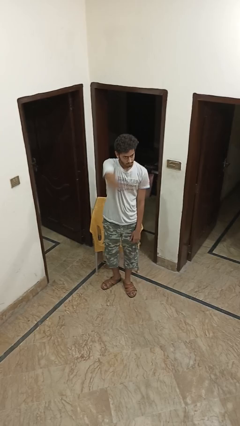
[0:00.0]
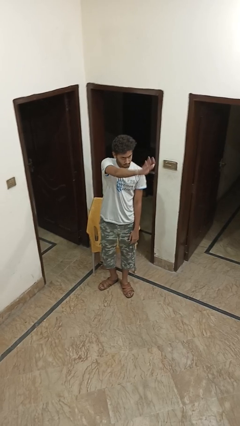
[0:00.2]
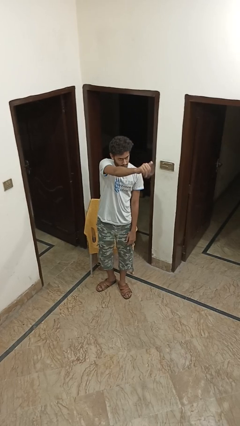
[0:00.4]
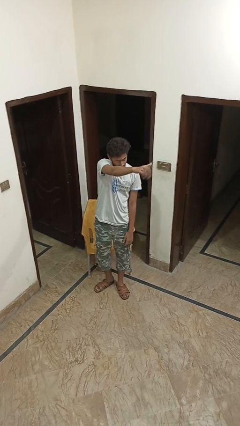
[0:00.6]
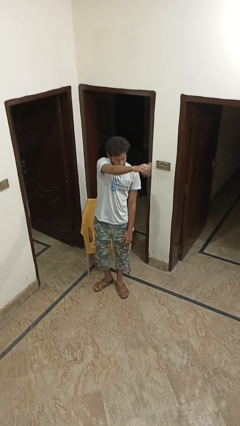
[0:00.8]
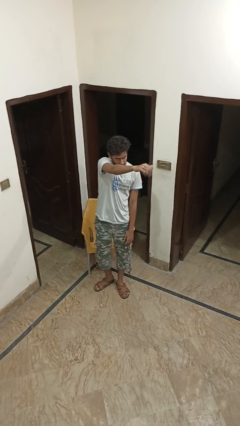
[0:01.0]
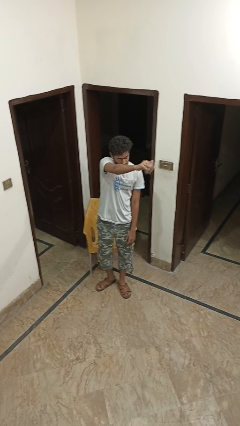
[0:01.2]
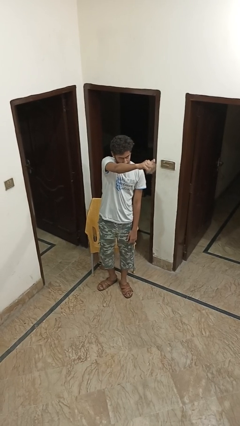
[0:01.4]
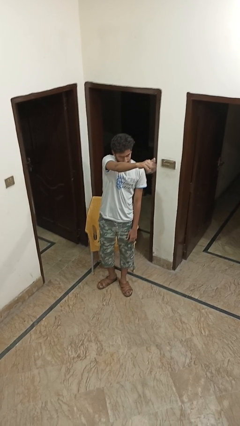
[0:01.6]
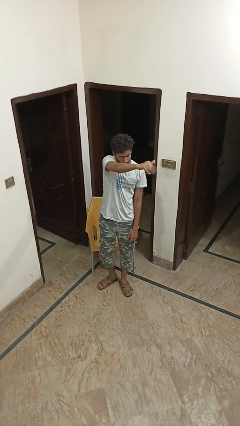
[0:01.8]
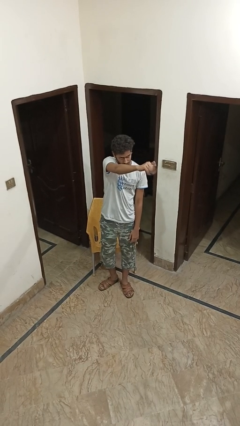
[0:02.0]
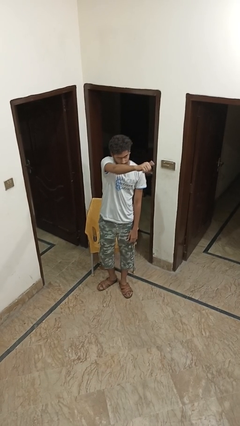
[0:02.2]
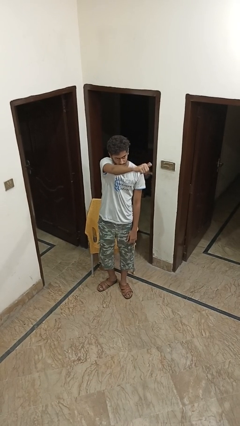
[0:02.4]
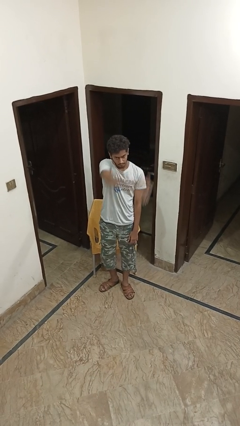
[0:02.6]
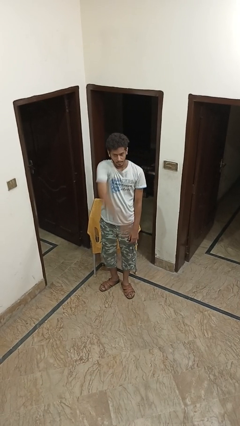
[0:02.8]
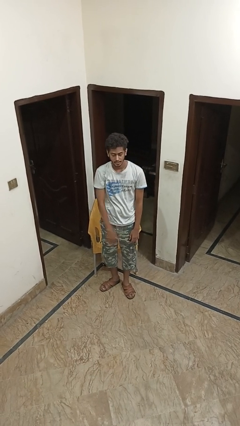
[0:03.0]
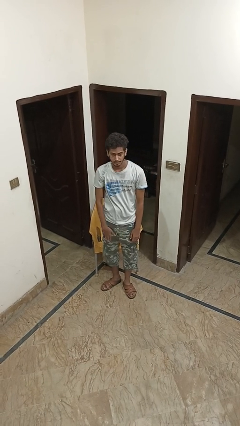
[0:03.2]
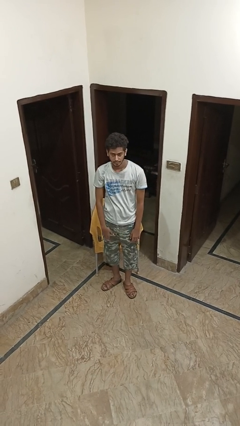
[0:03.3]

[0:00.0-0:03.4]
person gestures come here

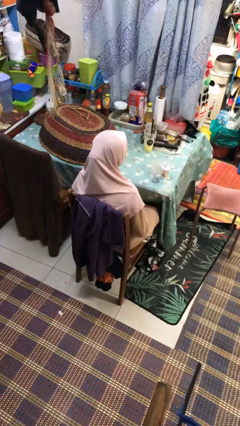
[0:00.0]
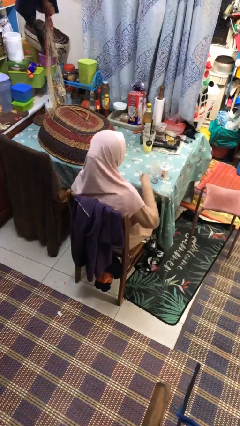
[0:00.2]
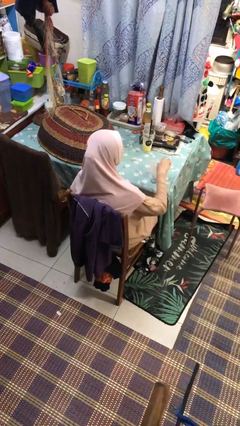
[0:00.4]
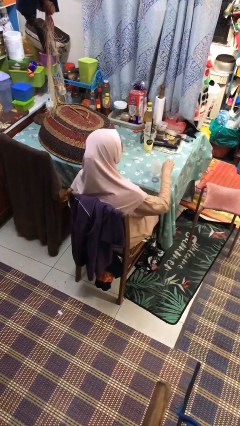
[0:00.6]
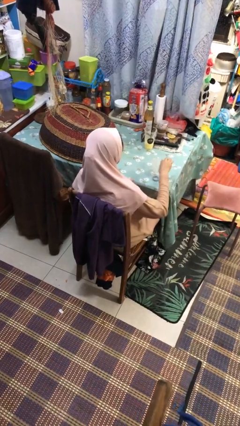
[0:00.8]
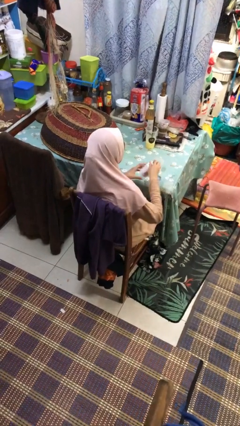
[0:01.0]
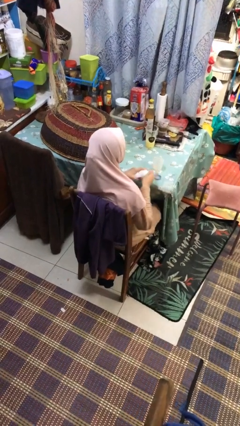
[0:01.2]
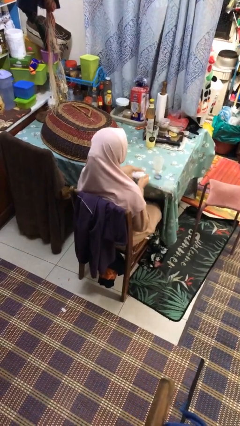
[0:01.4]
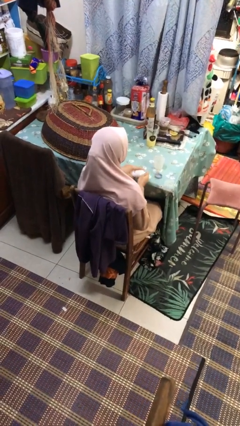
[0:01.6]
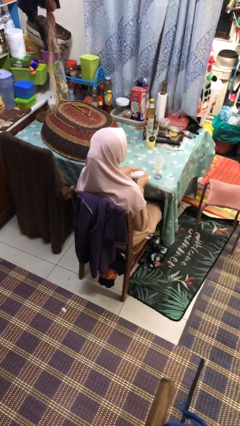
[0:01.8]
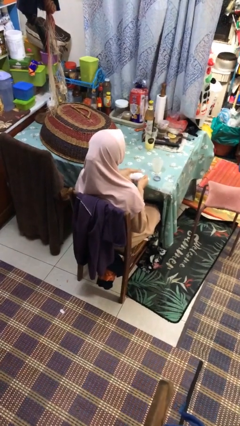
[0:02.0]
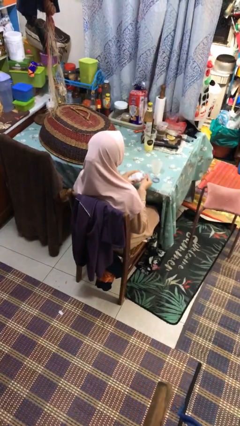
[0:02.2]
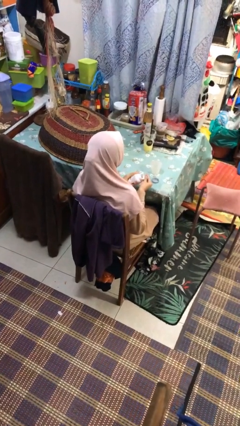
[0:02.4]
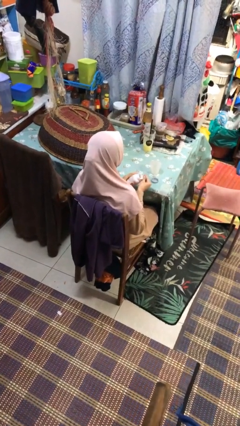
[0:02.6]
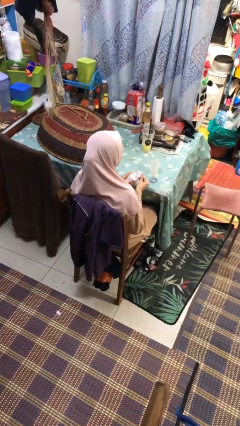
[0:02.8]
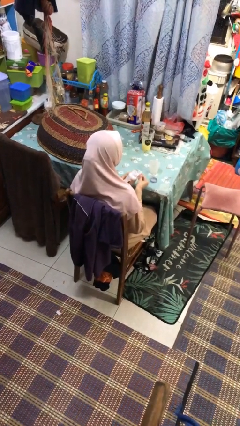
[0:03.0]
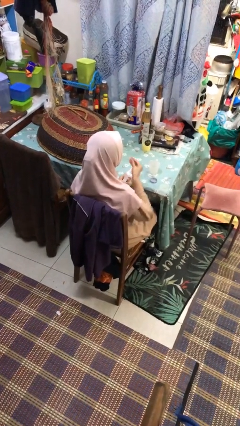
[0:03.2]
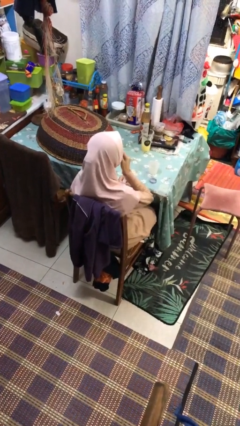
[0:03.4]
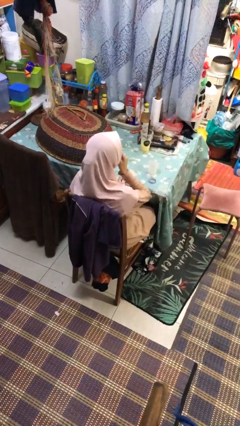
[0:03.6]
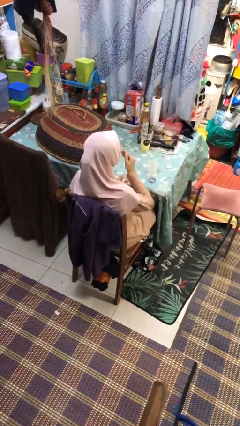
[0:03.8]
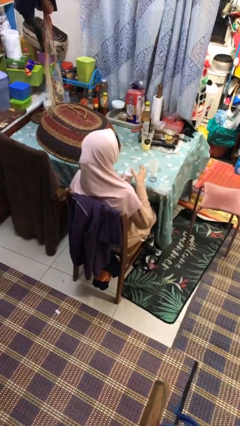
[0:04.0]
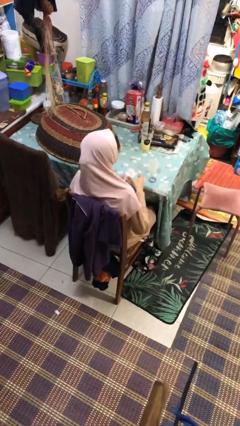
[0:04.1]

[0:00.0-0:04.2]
person takes medicine pills

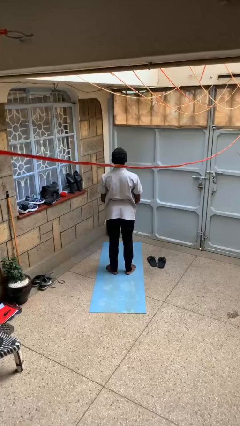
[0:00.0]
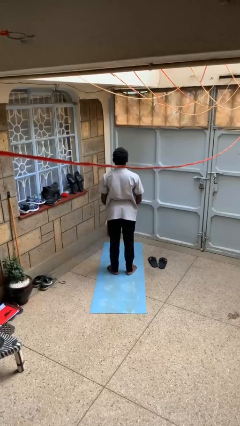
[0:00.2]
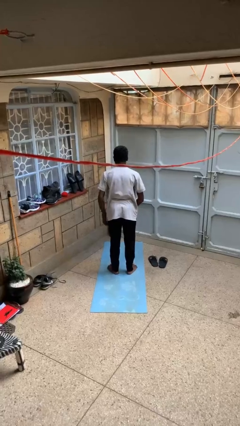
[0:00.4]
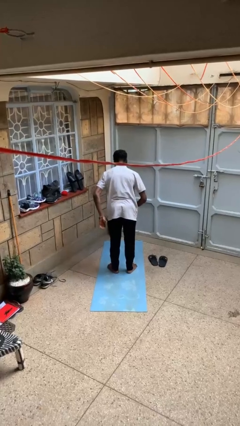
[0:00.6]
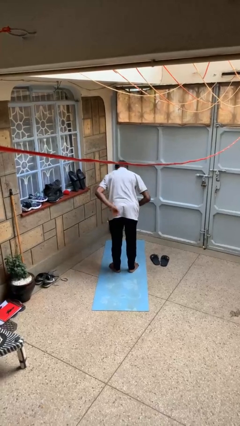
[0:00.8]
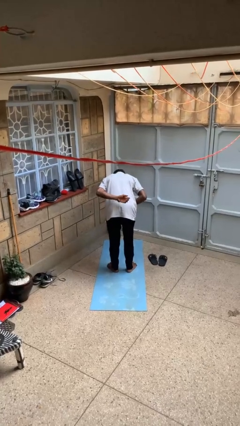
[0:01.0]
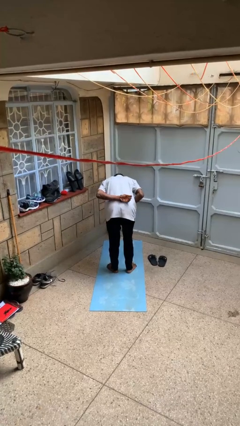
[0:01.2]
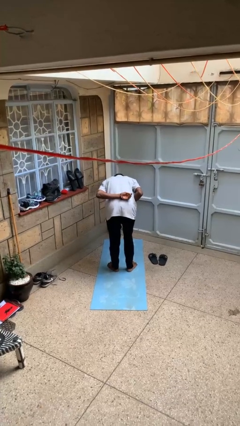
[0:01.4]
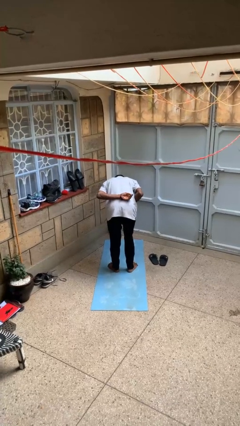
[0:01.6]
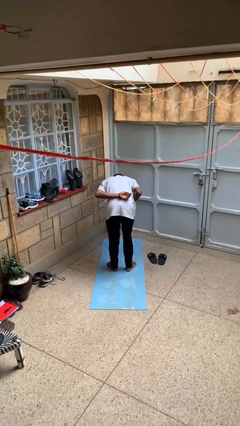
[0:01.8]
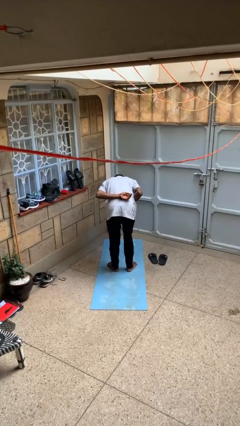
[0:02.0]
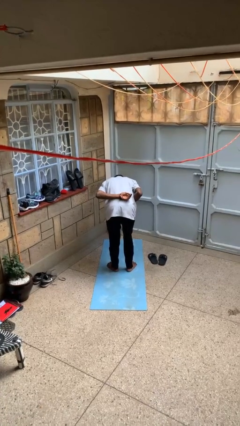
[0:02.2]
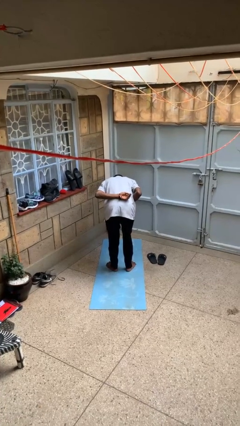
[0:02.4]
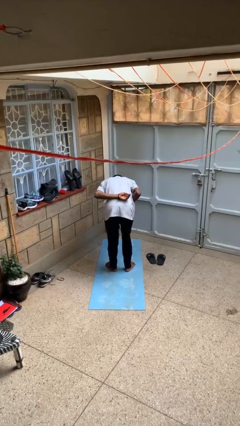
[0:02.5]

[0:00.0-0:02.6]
person bows

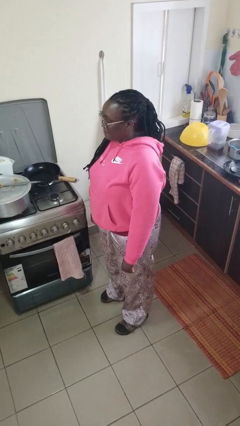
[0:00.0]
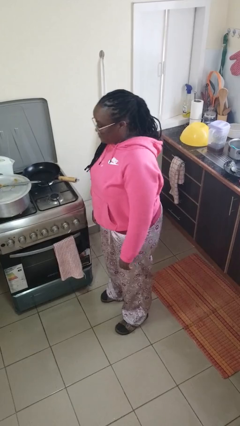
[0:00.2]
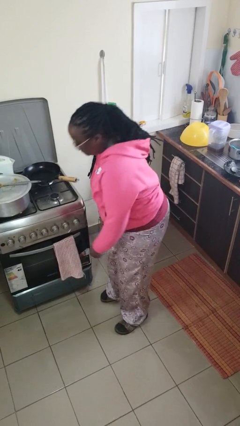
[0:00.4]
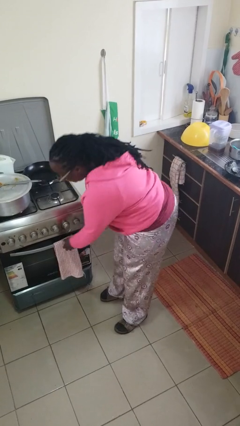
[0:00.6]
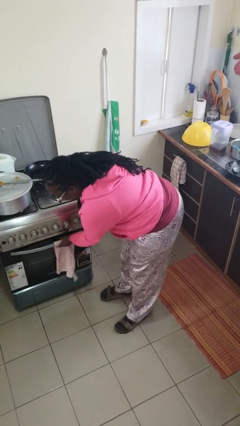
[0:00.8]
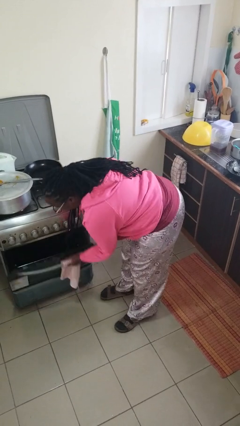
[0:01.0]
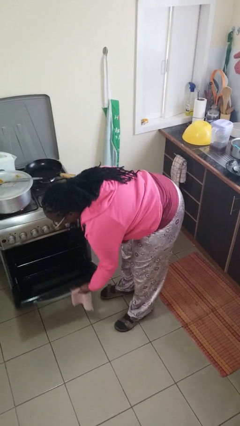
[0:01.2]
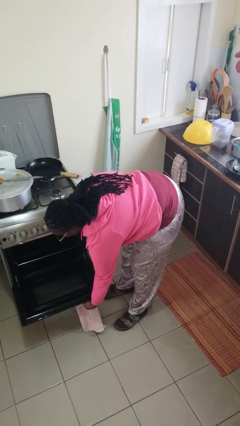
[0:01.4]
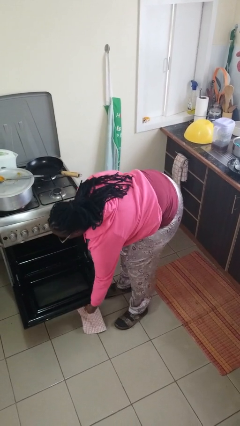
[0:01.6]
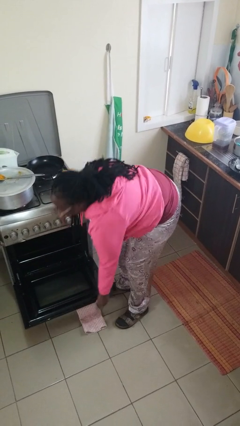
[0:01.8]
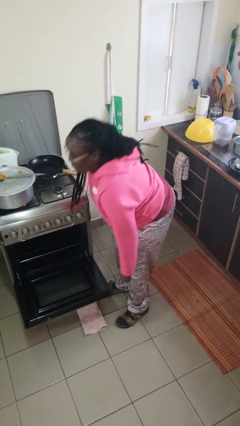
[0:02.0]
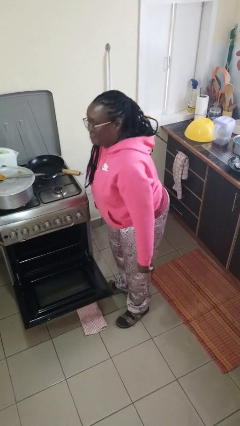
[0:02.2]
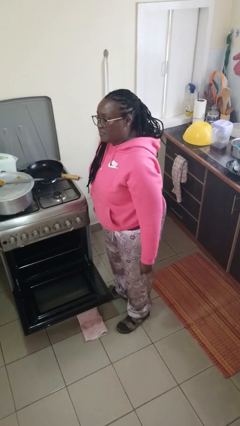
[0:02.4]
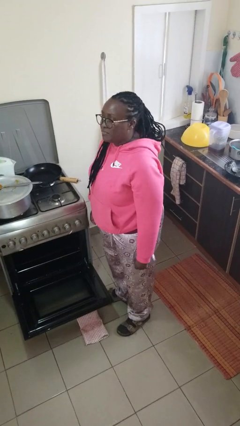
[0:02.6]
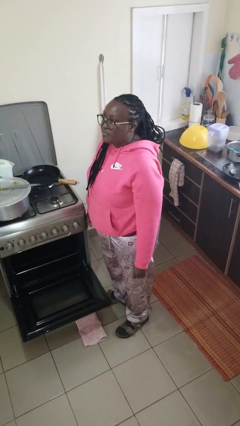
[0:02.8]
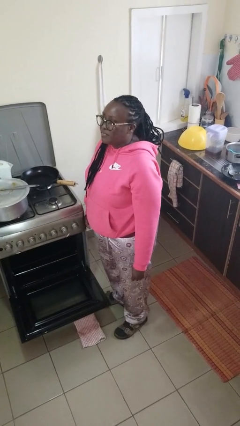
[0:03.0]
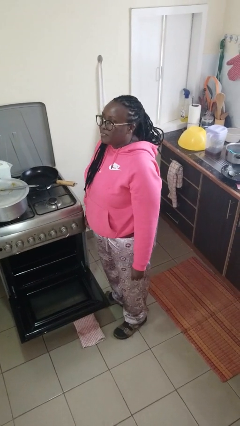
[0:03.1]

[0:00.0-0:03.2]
person opens oven door

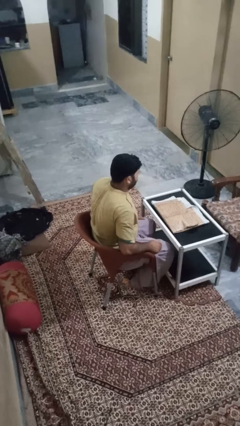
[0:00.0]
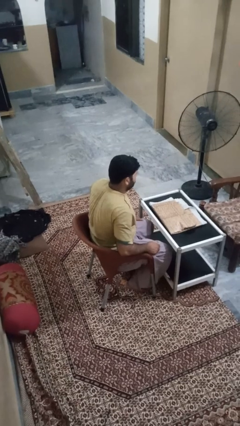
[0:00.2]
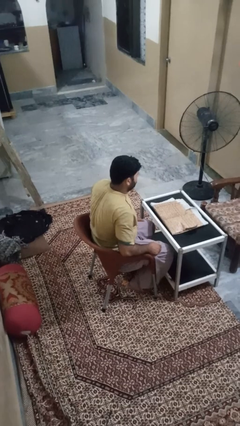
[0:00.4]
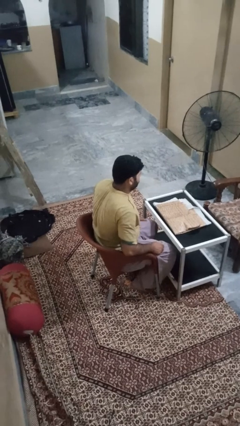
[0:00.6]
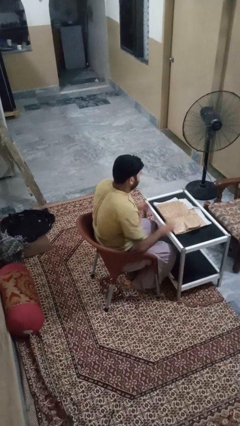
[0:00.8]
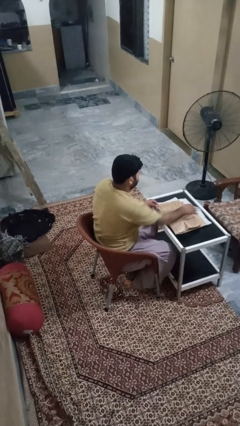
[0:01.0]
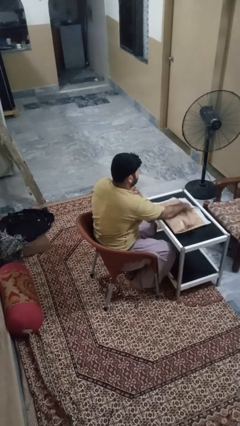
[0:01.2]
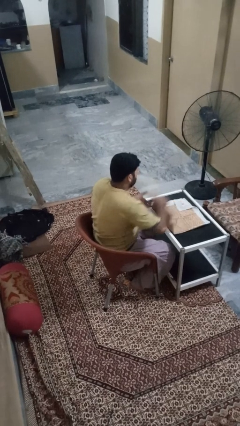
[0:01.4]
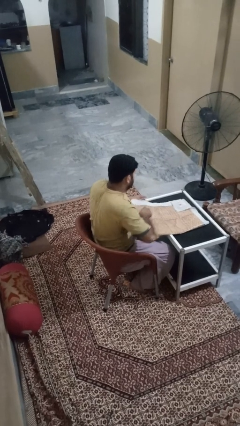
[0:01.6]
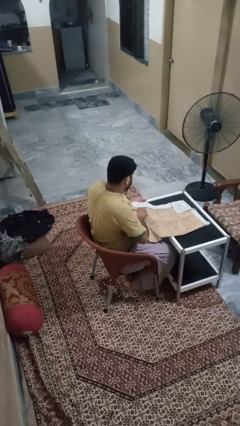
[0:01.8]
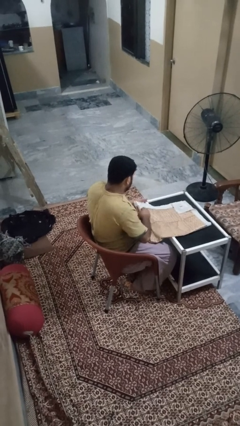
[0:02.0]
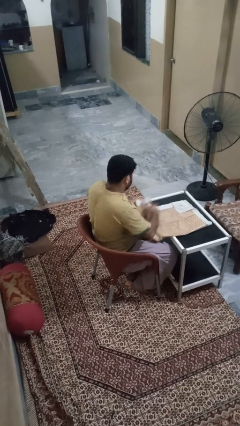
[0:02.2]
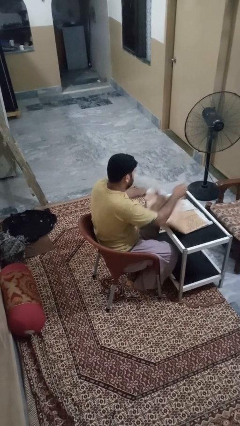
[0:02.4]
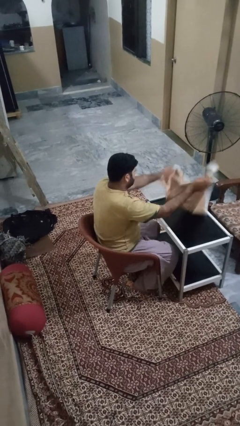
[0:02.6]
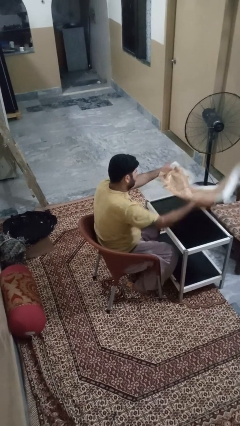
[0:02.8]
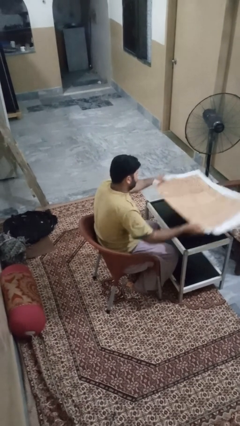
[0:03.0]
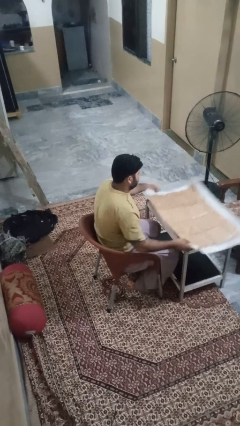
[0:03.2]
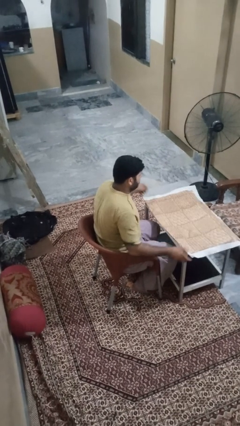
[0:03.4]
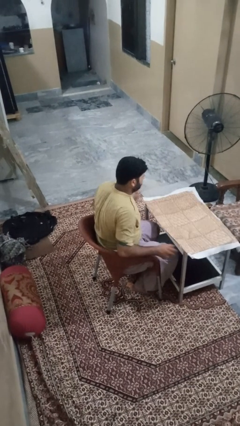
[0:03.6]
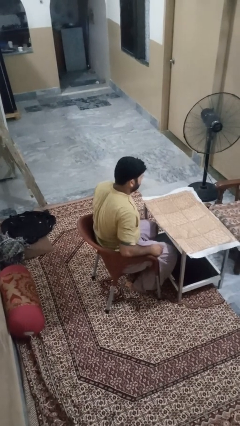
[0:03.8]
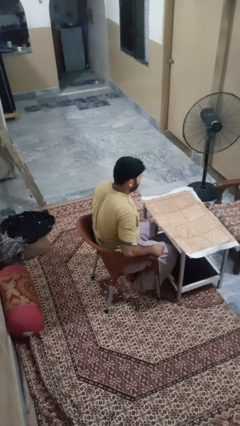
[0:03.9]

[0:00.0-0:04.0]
person spreads tablecloth
